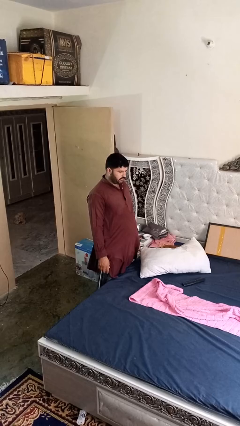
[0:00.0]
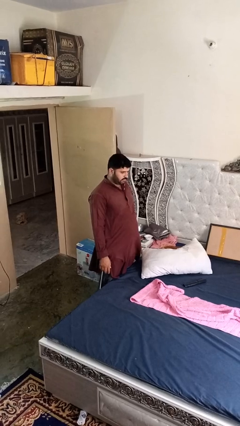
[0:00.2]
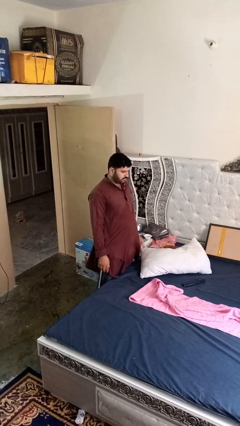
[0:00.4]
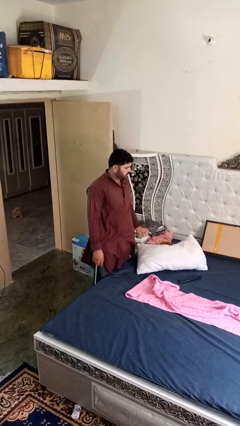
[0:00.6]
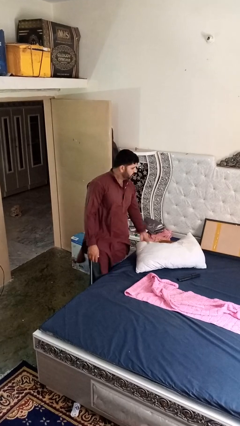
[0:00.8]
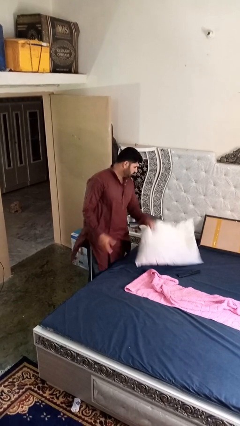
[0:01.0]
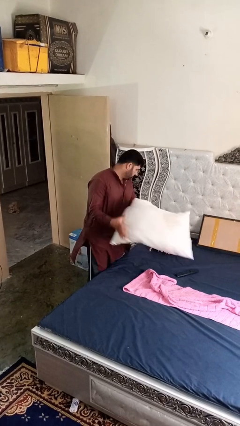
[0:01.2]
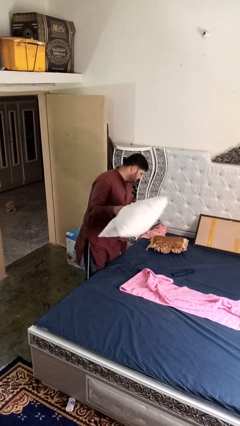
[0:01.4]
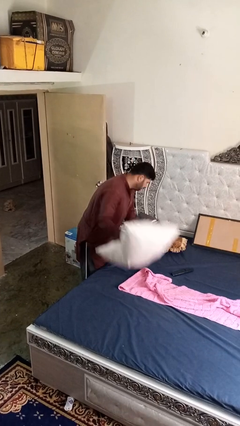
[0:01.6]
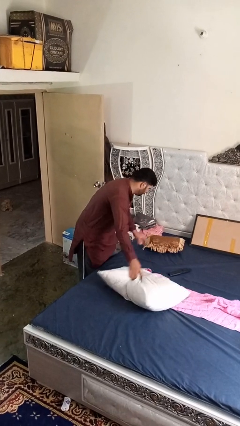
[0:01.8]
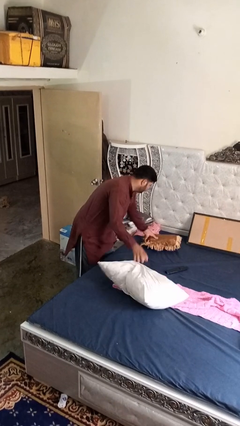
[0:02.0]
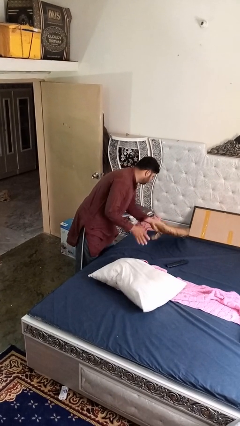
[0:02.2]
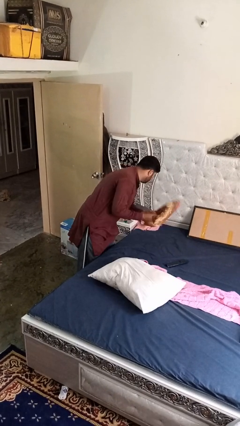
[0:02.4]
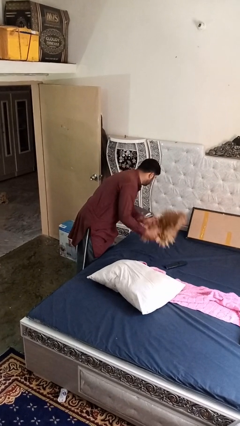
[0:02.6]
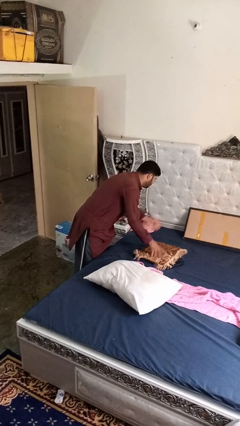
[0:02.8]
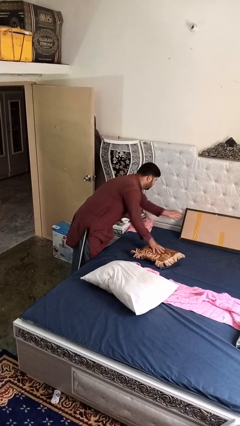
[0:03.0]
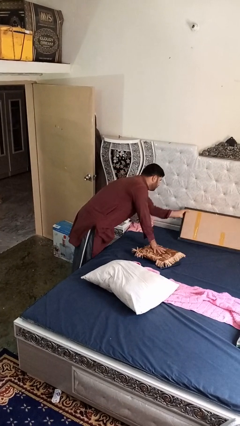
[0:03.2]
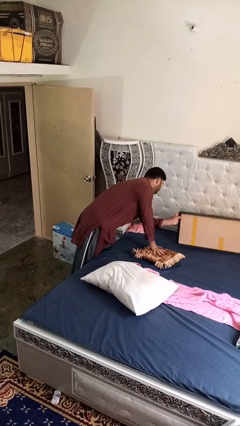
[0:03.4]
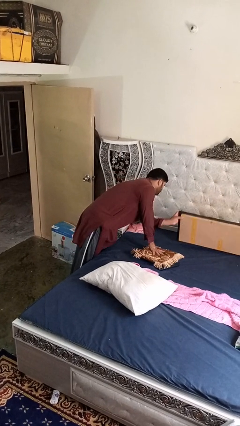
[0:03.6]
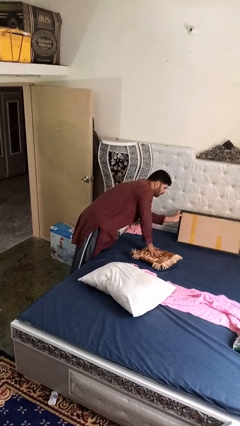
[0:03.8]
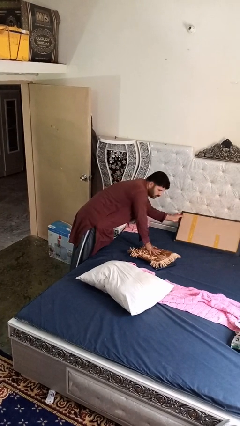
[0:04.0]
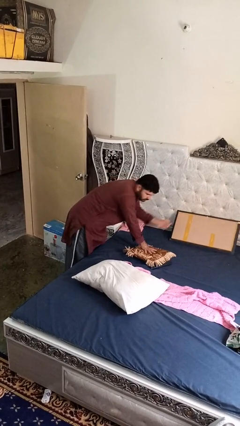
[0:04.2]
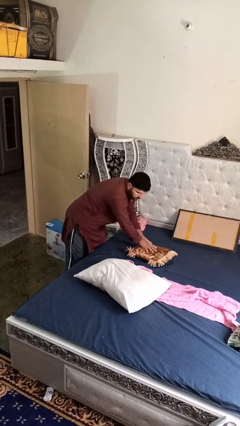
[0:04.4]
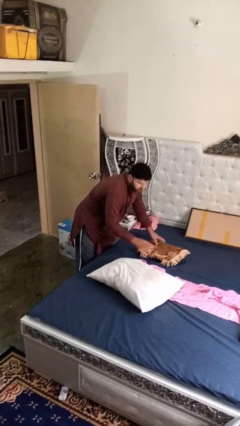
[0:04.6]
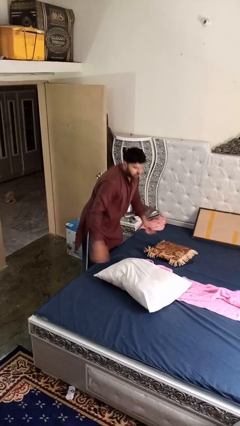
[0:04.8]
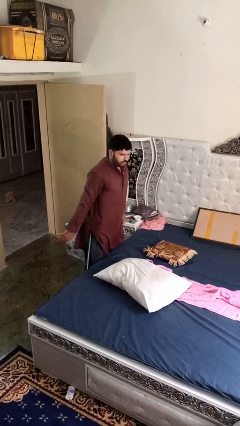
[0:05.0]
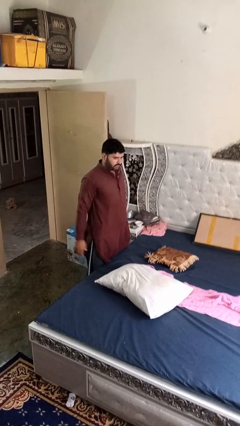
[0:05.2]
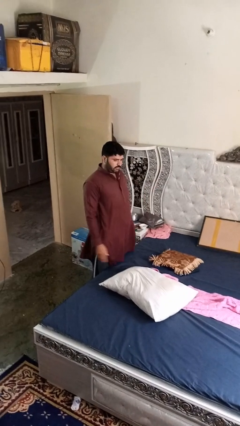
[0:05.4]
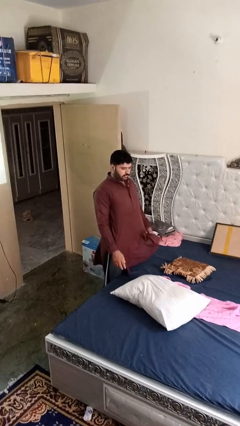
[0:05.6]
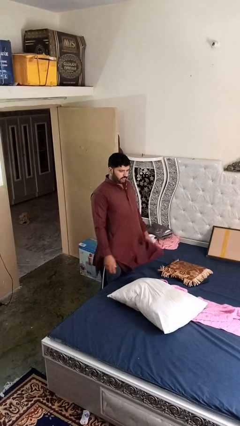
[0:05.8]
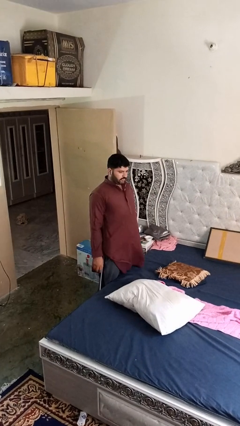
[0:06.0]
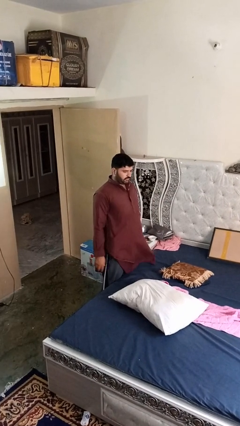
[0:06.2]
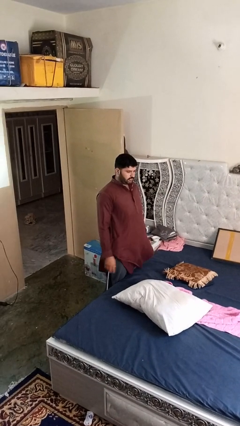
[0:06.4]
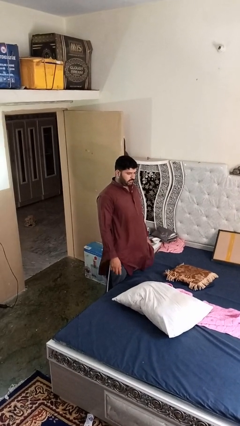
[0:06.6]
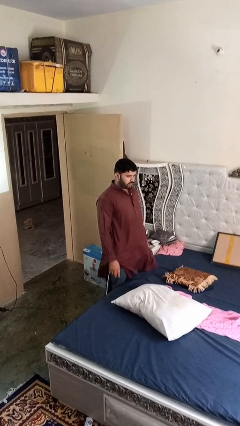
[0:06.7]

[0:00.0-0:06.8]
person searches under bed

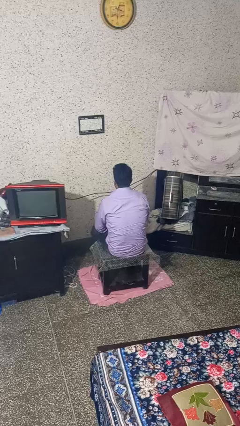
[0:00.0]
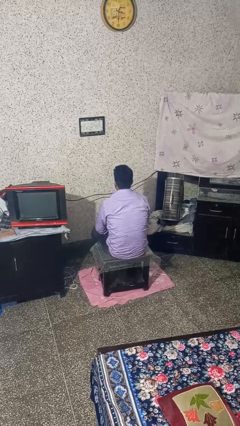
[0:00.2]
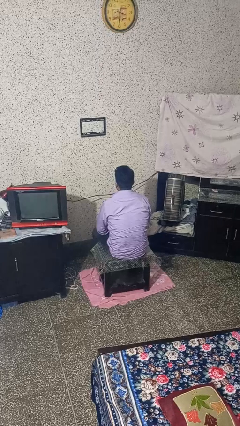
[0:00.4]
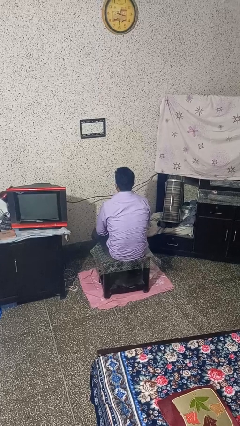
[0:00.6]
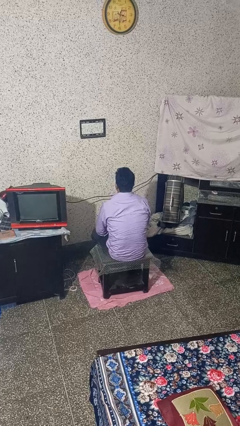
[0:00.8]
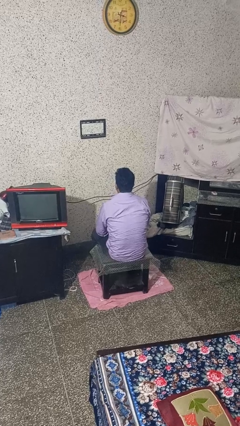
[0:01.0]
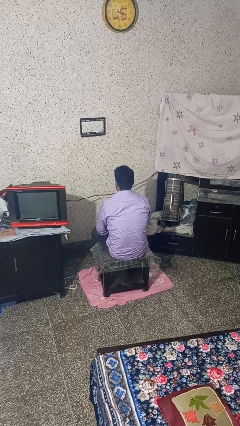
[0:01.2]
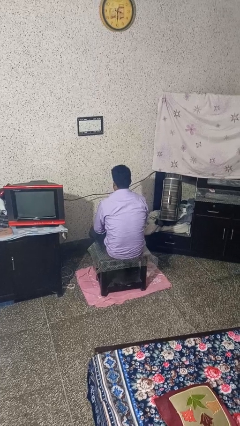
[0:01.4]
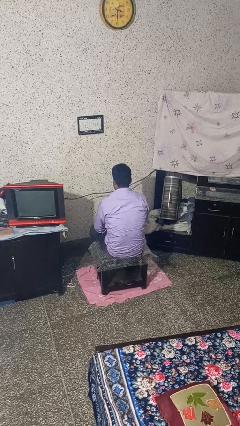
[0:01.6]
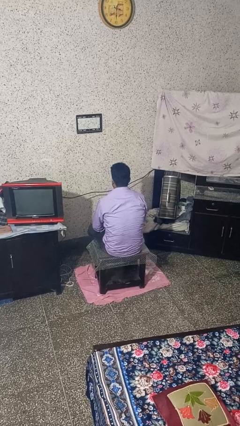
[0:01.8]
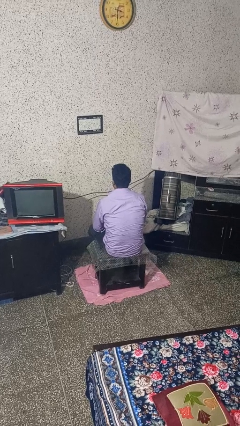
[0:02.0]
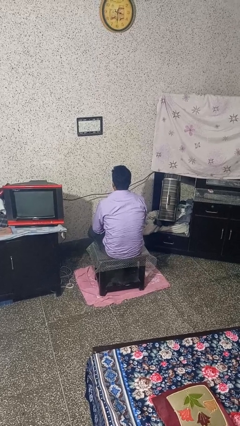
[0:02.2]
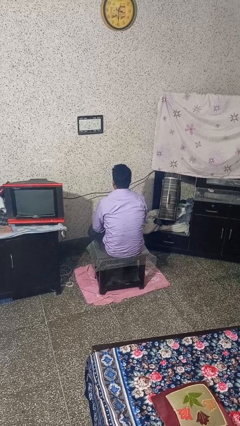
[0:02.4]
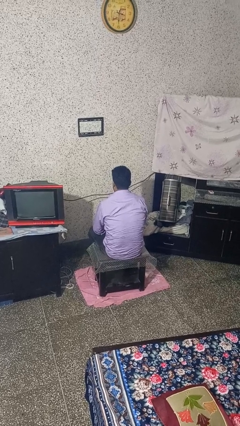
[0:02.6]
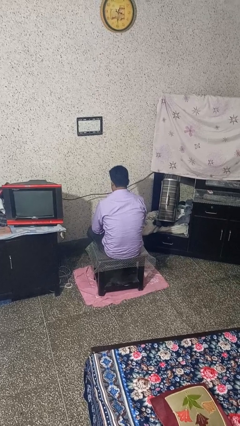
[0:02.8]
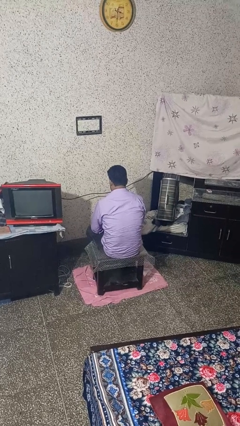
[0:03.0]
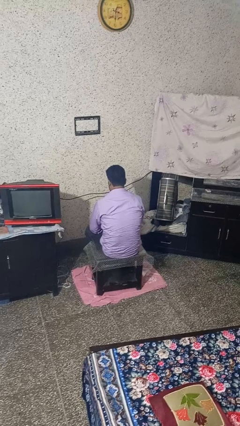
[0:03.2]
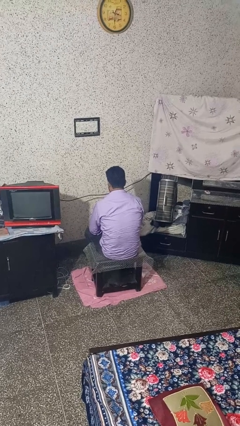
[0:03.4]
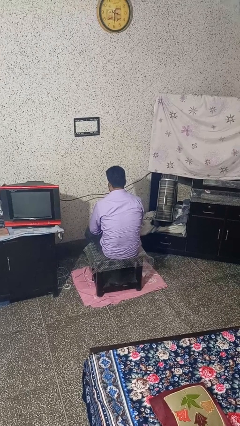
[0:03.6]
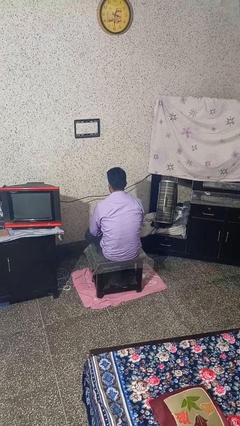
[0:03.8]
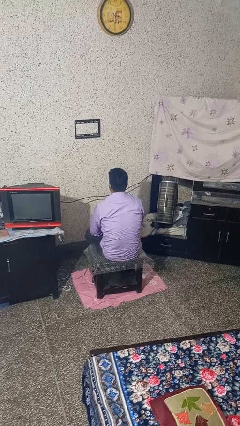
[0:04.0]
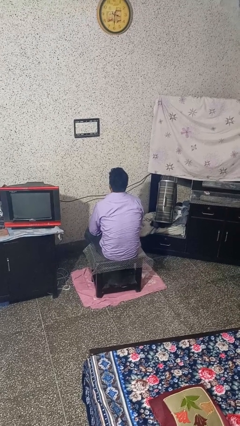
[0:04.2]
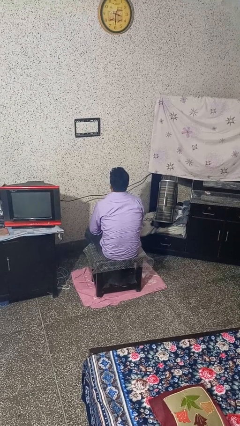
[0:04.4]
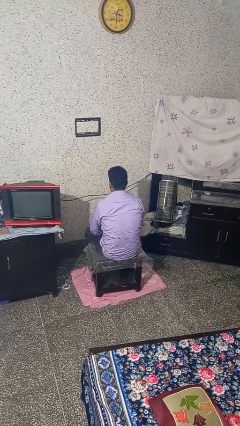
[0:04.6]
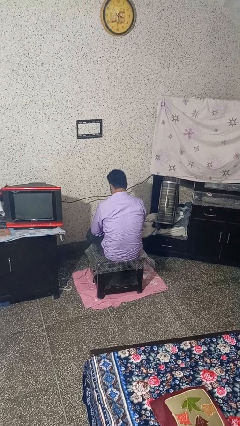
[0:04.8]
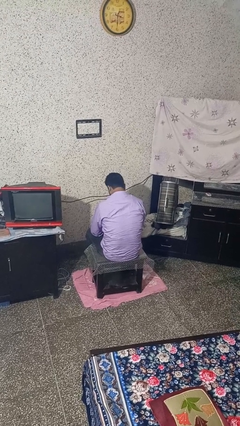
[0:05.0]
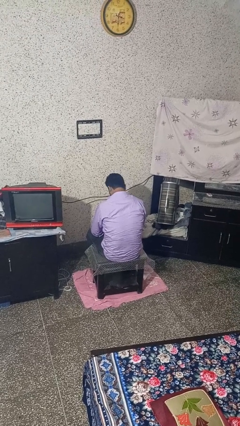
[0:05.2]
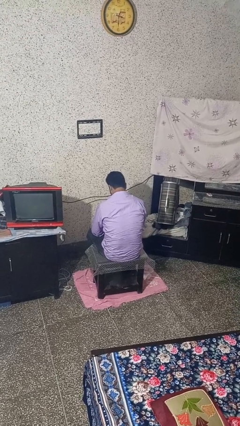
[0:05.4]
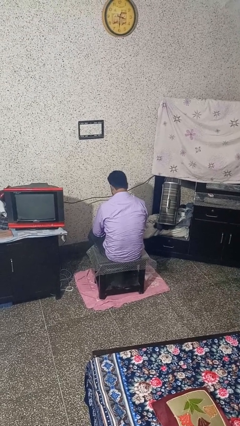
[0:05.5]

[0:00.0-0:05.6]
person nods head

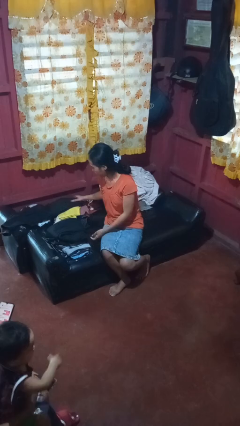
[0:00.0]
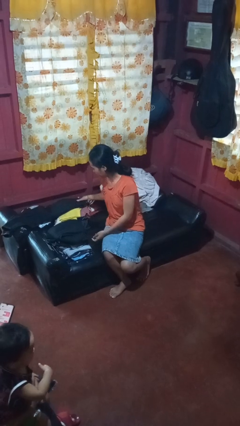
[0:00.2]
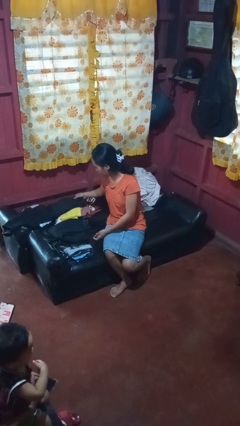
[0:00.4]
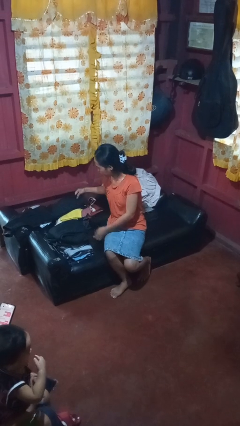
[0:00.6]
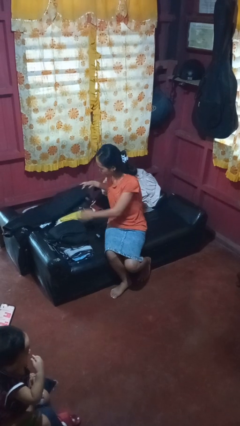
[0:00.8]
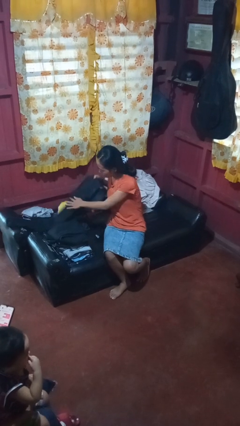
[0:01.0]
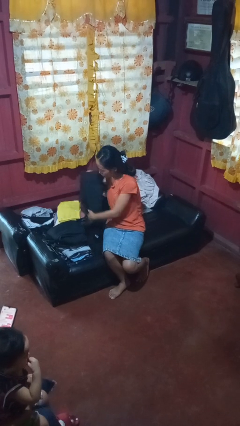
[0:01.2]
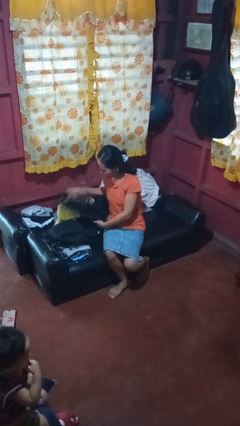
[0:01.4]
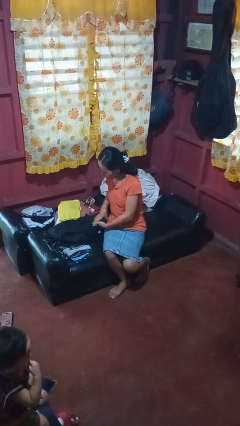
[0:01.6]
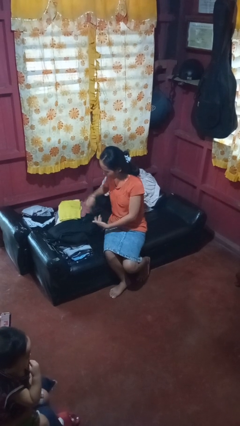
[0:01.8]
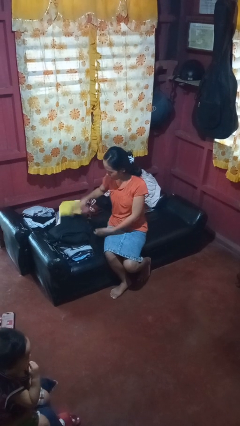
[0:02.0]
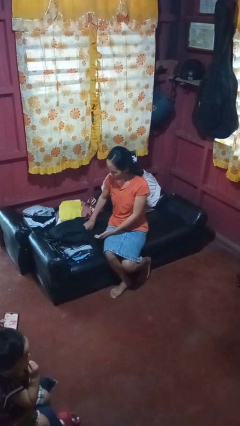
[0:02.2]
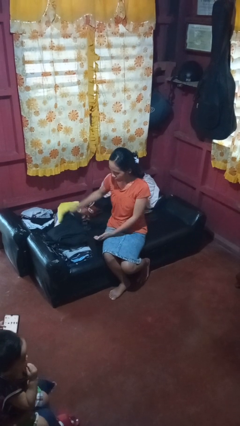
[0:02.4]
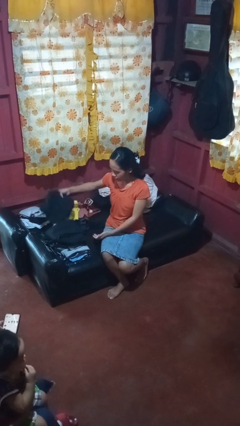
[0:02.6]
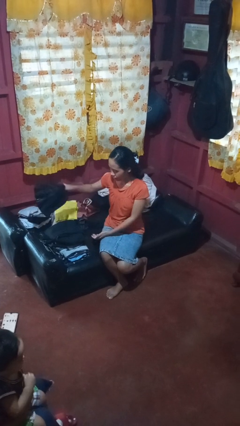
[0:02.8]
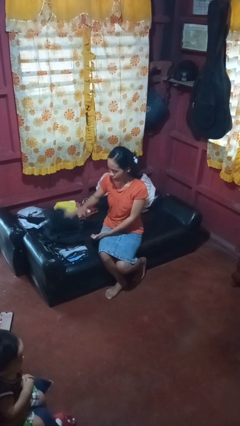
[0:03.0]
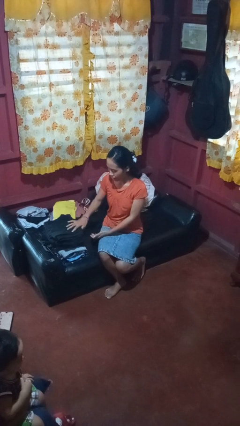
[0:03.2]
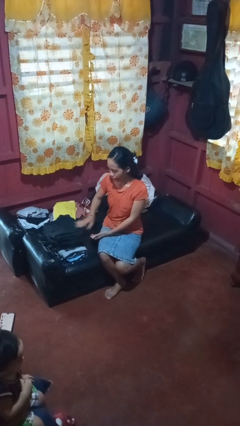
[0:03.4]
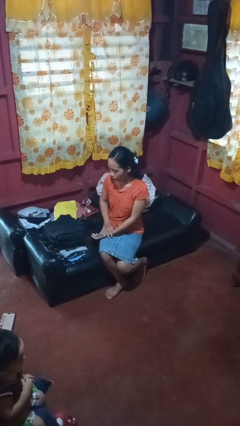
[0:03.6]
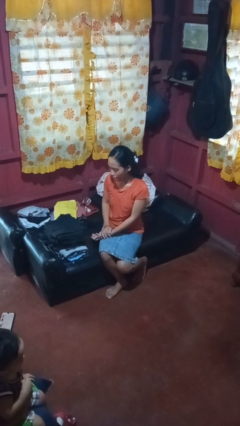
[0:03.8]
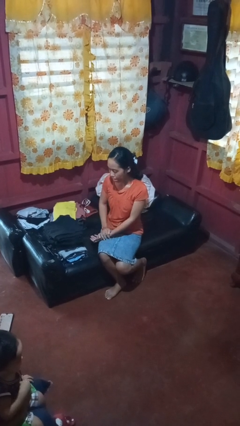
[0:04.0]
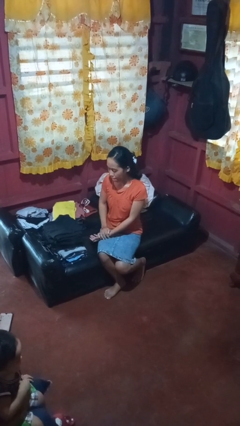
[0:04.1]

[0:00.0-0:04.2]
person folds pants

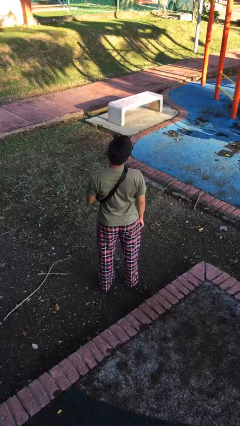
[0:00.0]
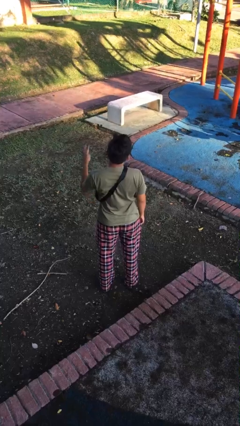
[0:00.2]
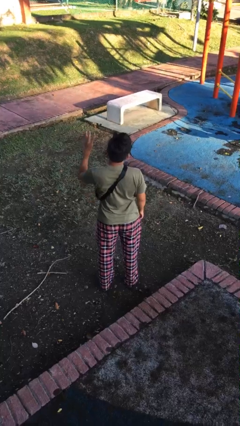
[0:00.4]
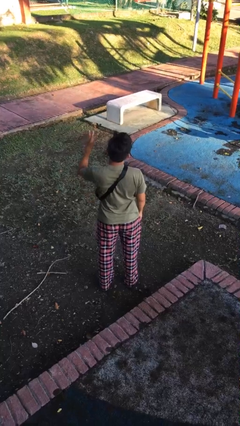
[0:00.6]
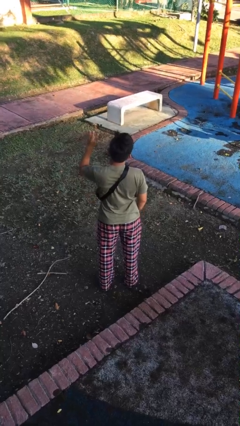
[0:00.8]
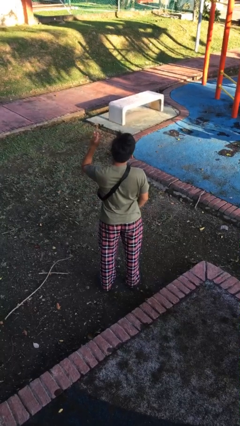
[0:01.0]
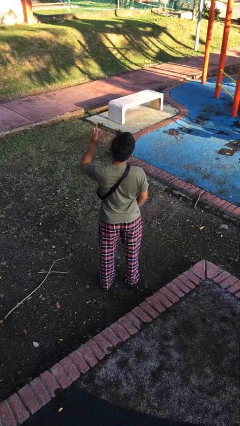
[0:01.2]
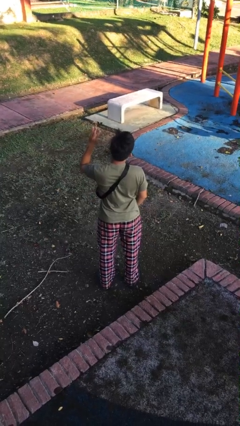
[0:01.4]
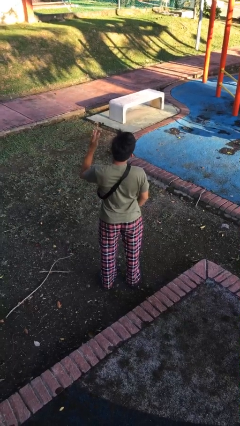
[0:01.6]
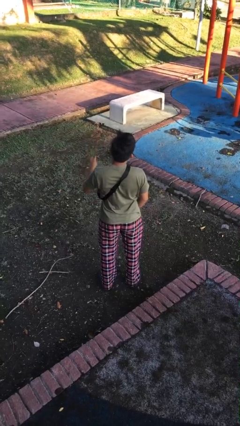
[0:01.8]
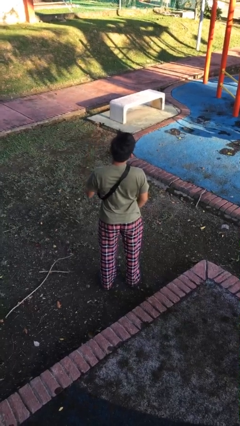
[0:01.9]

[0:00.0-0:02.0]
person gestures number three
